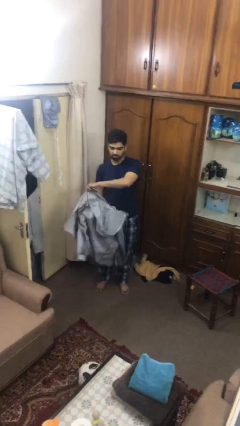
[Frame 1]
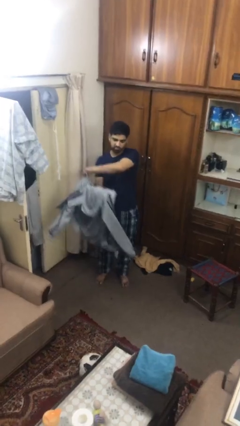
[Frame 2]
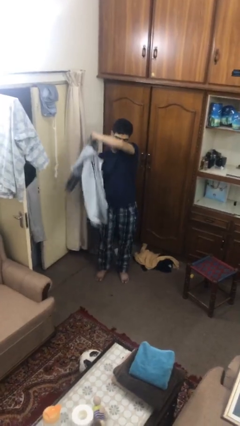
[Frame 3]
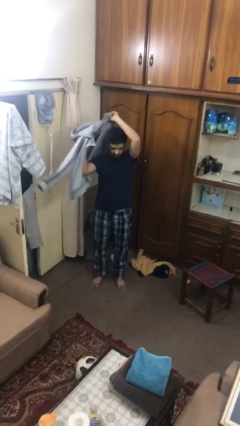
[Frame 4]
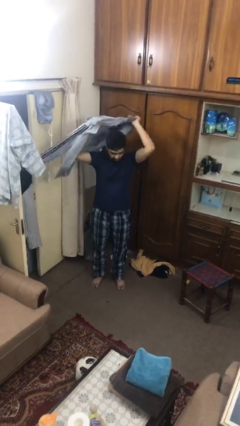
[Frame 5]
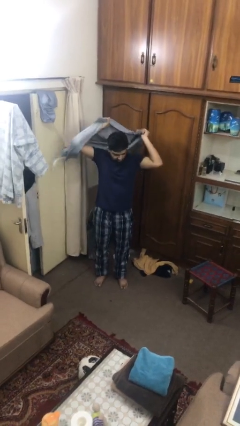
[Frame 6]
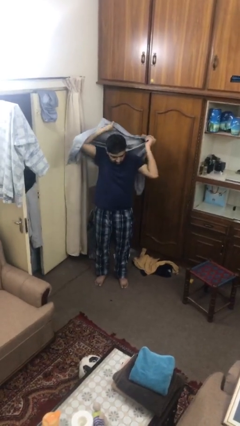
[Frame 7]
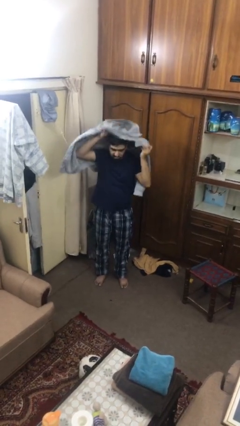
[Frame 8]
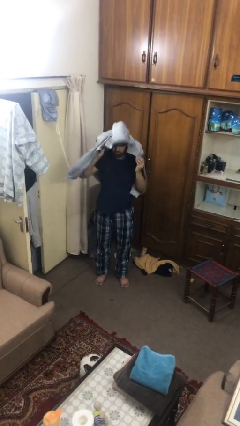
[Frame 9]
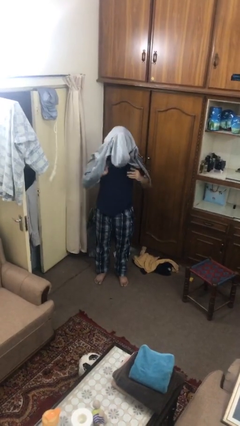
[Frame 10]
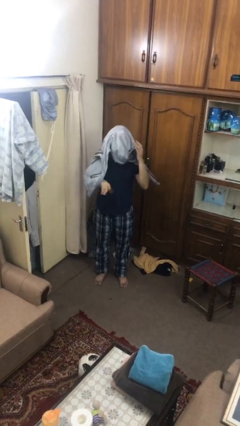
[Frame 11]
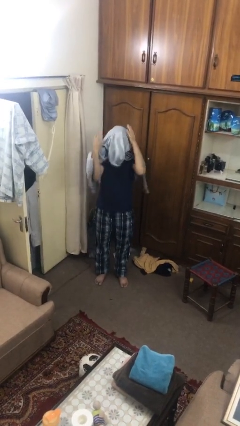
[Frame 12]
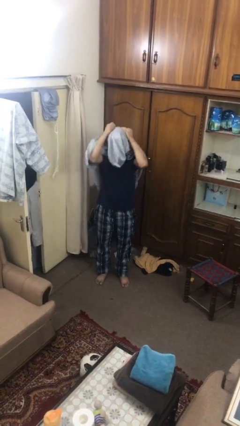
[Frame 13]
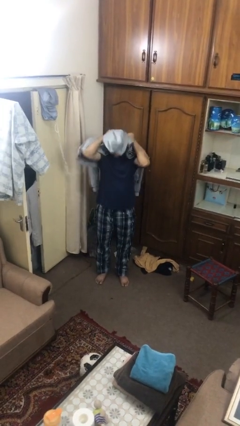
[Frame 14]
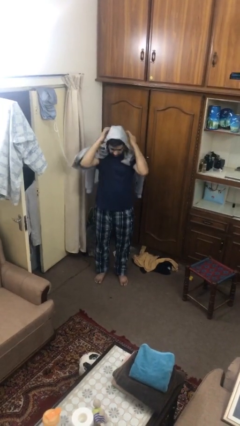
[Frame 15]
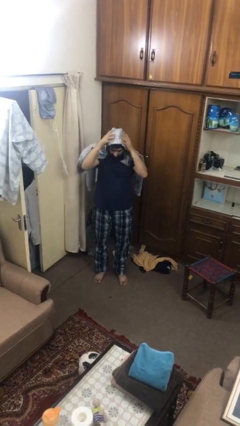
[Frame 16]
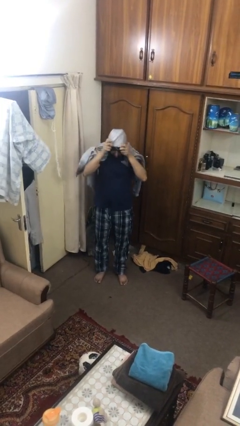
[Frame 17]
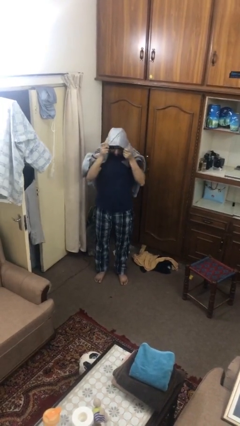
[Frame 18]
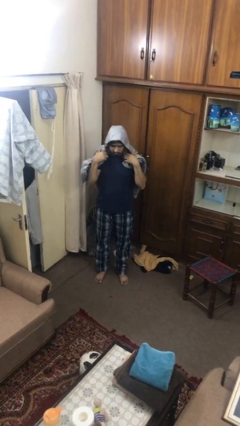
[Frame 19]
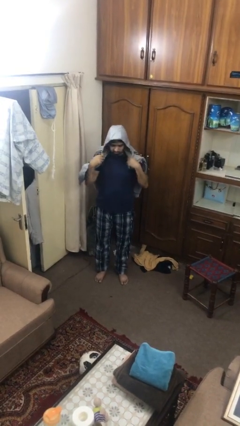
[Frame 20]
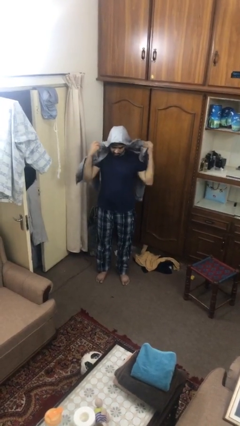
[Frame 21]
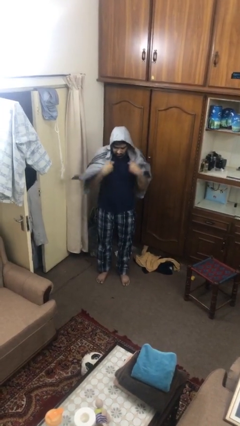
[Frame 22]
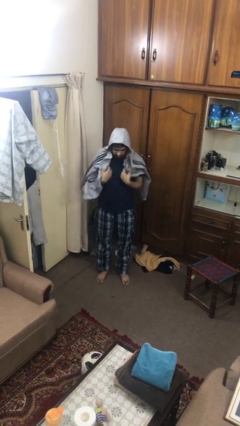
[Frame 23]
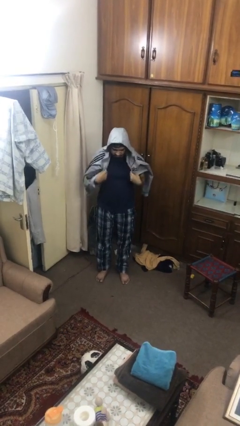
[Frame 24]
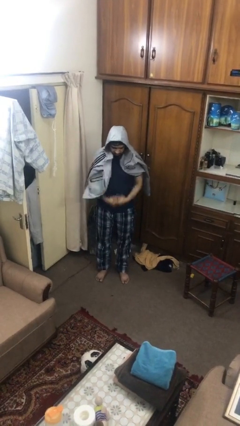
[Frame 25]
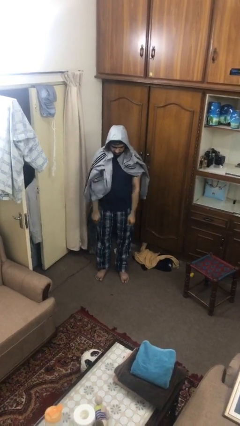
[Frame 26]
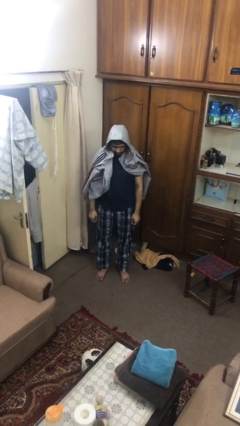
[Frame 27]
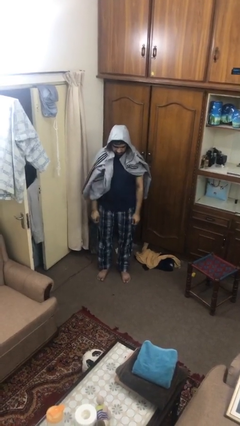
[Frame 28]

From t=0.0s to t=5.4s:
person puts on hoodie

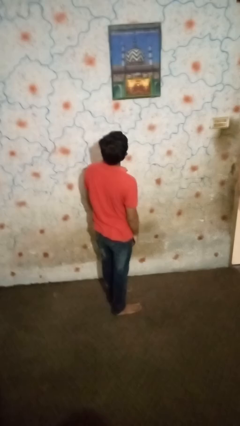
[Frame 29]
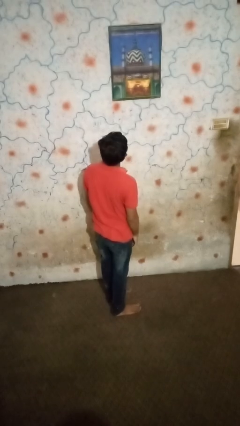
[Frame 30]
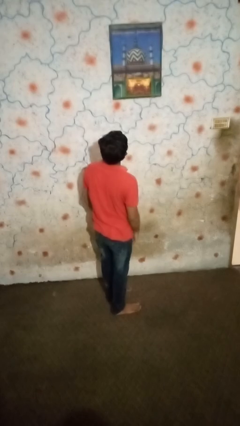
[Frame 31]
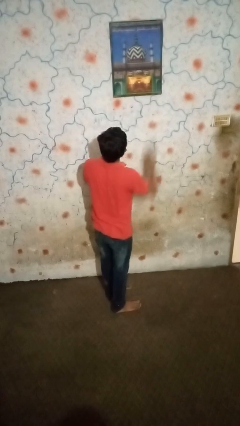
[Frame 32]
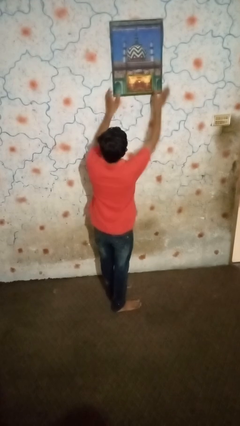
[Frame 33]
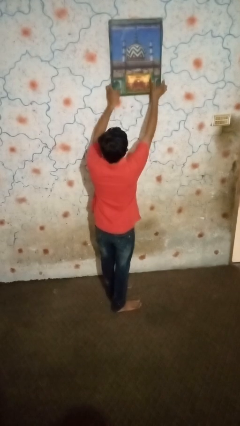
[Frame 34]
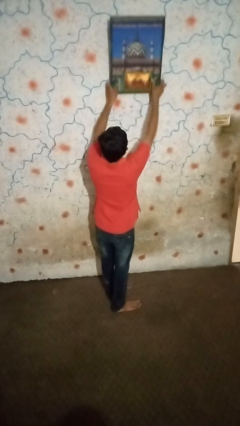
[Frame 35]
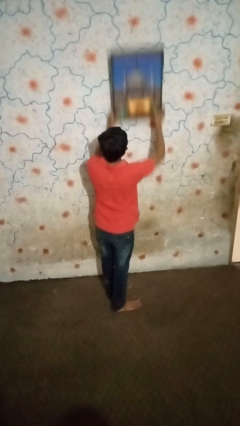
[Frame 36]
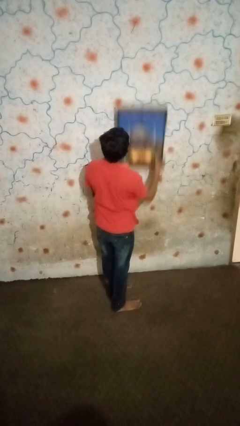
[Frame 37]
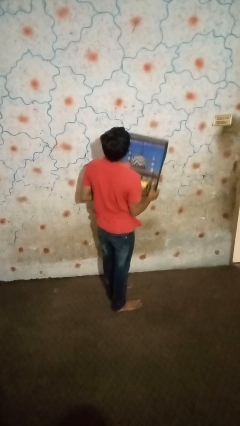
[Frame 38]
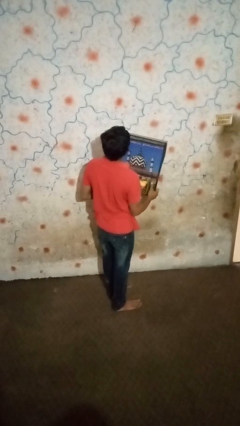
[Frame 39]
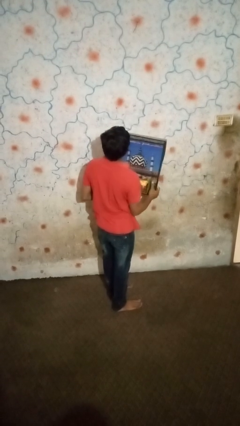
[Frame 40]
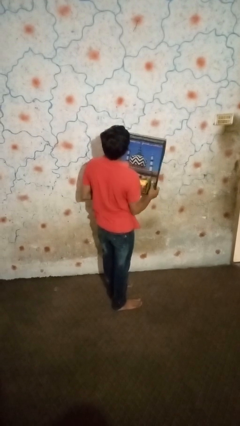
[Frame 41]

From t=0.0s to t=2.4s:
person takes down picture frame

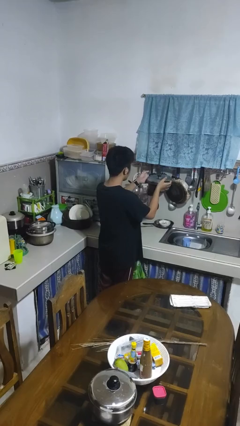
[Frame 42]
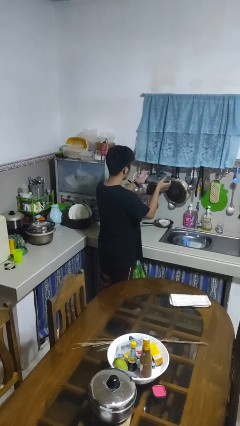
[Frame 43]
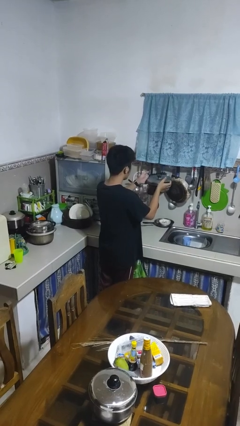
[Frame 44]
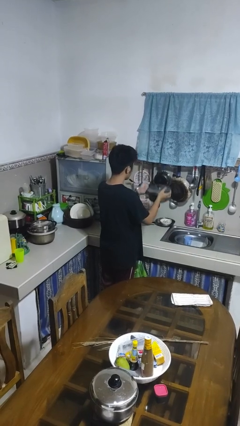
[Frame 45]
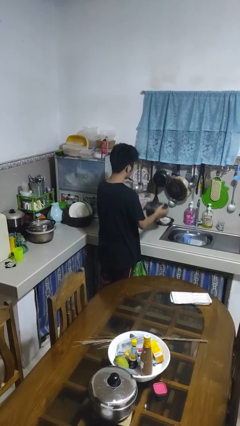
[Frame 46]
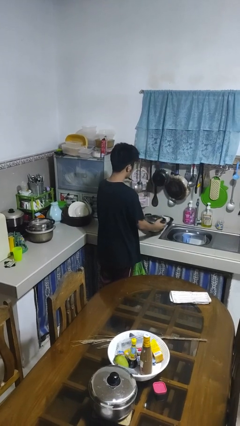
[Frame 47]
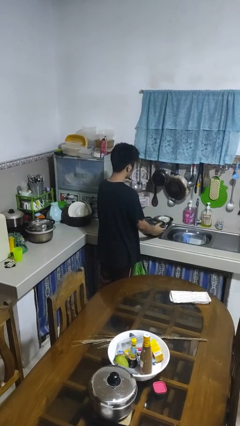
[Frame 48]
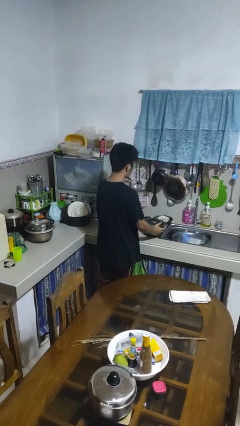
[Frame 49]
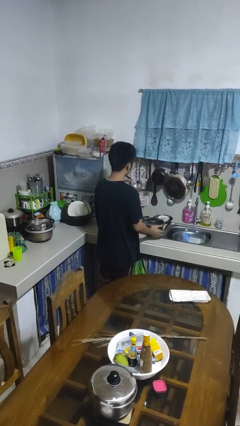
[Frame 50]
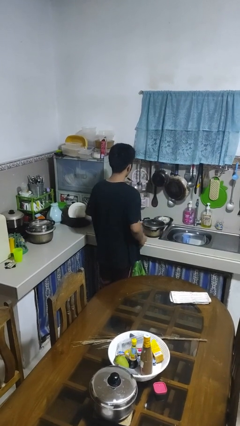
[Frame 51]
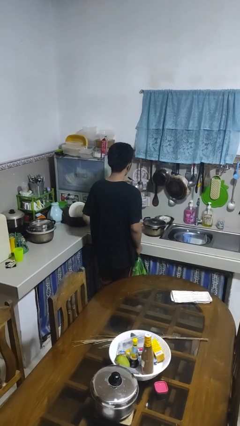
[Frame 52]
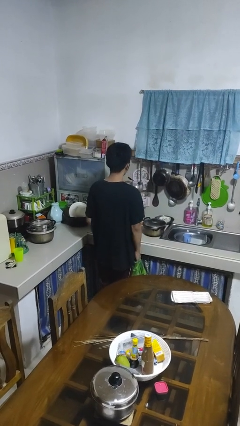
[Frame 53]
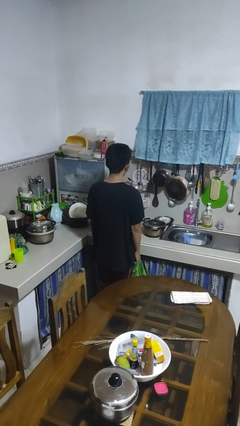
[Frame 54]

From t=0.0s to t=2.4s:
person puts down object on countertop

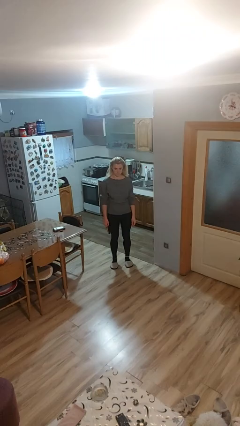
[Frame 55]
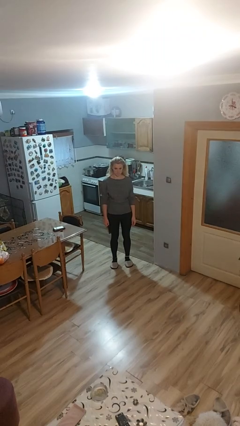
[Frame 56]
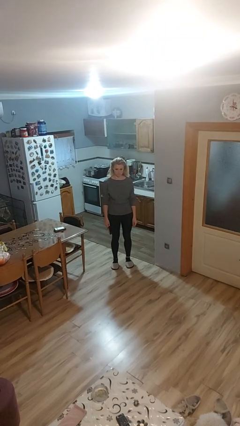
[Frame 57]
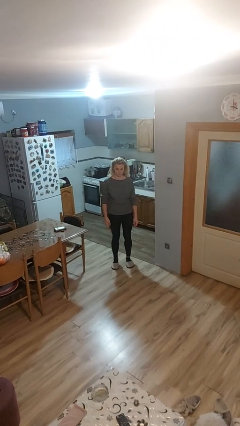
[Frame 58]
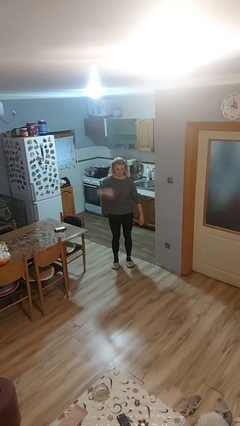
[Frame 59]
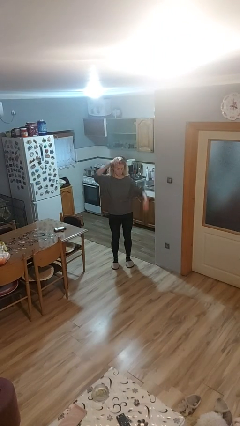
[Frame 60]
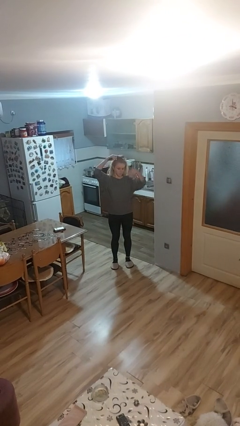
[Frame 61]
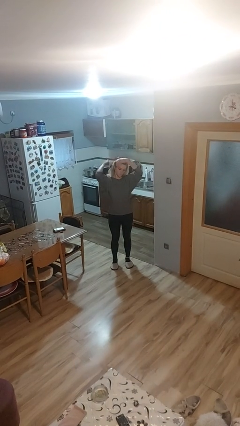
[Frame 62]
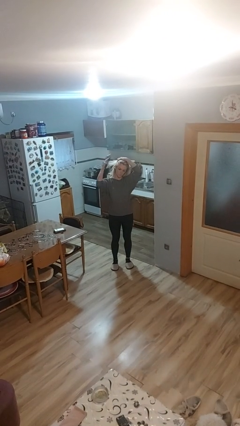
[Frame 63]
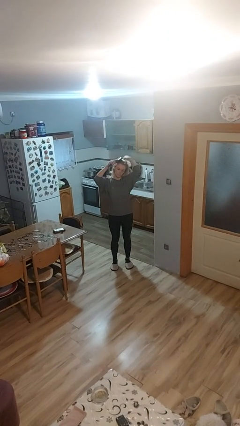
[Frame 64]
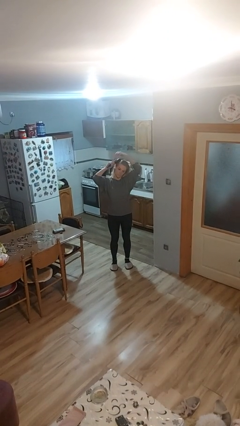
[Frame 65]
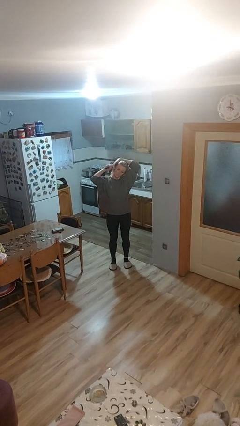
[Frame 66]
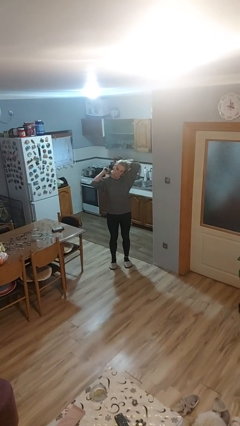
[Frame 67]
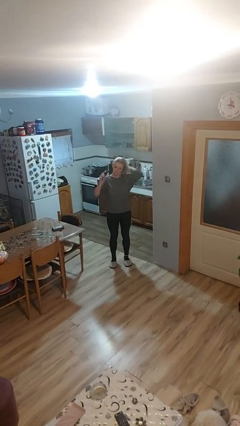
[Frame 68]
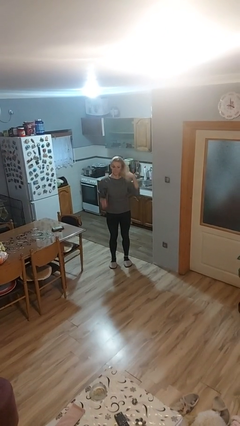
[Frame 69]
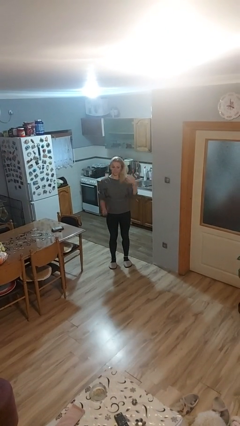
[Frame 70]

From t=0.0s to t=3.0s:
person brushes hair

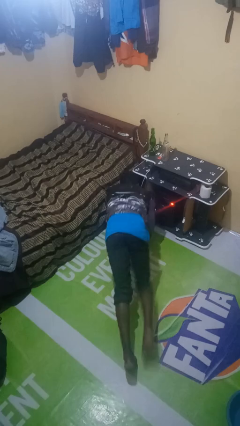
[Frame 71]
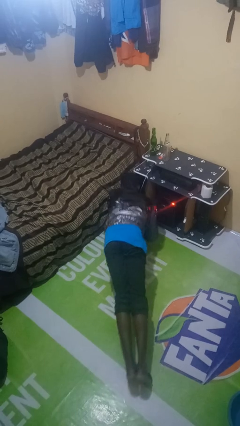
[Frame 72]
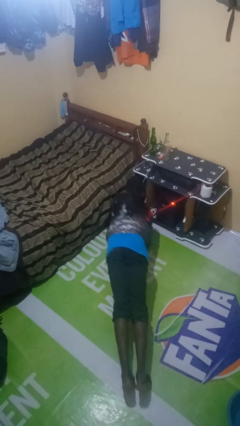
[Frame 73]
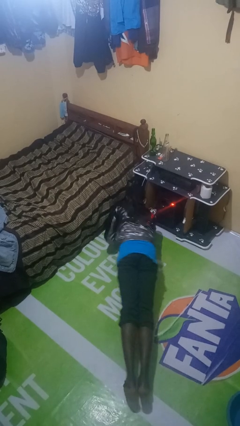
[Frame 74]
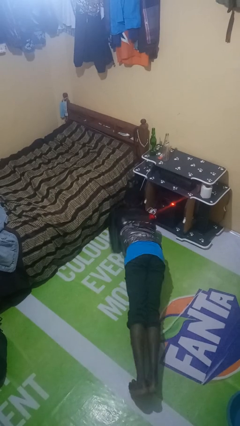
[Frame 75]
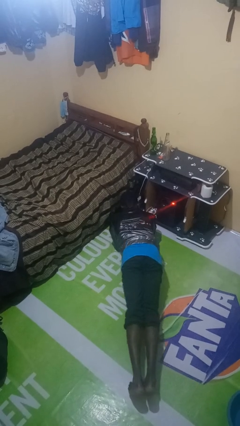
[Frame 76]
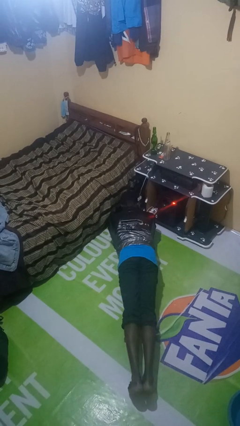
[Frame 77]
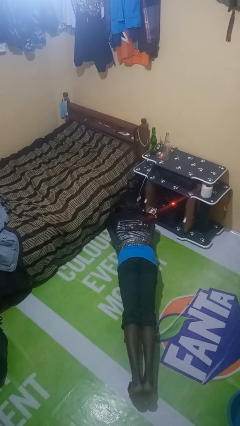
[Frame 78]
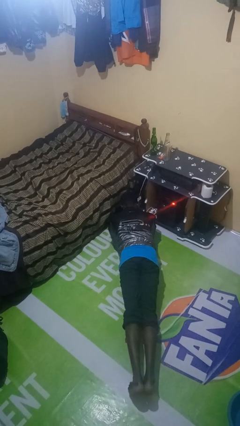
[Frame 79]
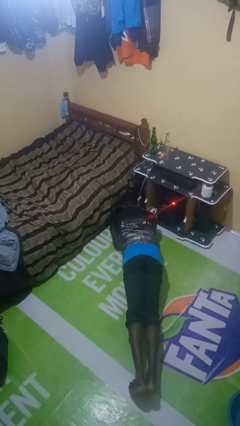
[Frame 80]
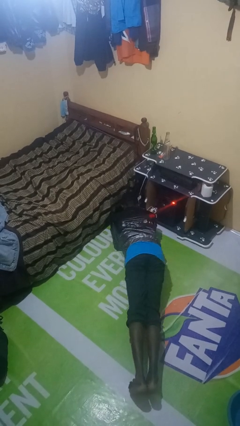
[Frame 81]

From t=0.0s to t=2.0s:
person exercises with plank

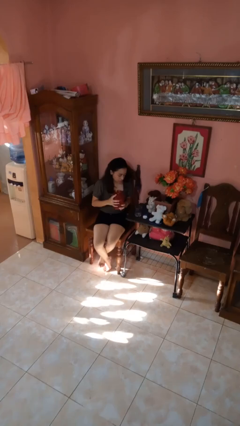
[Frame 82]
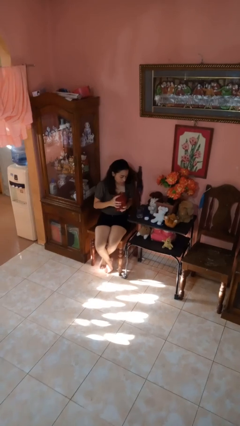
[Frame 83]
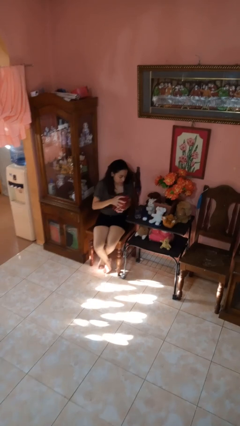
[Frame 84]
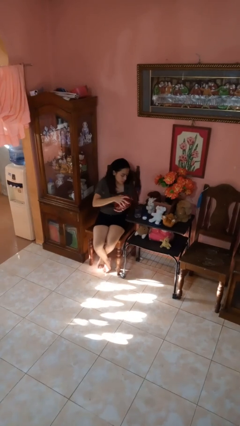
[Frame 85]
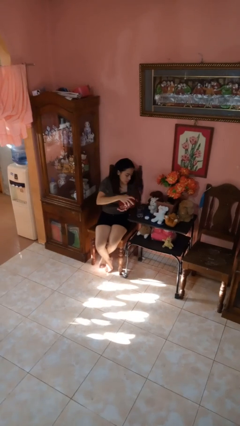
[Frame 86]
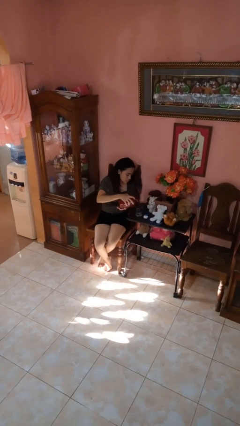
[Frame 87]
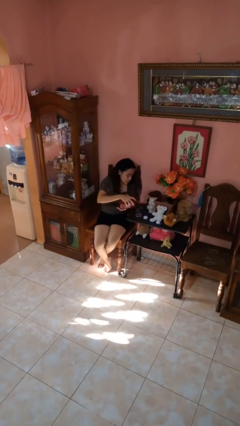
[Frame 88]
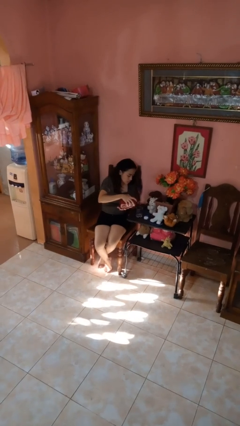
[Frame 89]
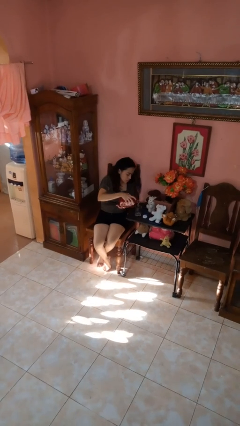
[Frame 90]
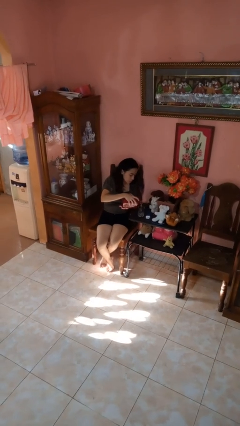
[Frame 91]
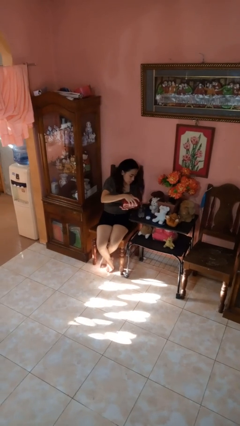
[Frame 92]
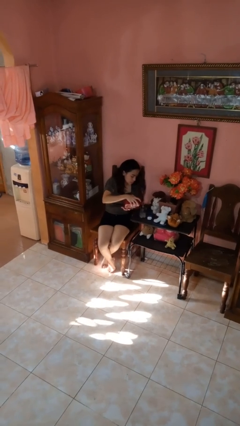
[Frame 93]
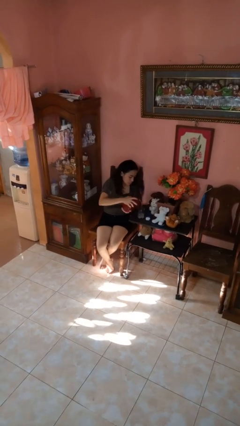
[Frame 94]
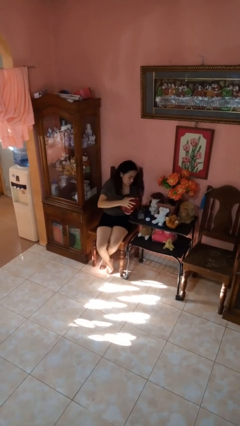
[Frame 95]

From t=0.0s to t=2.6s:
person pours liquid into cup
